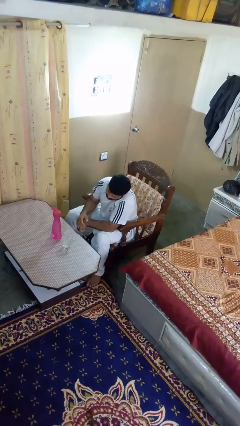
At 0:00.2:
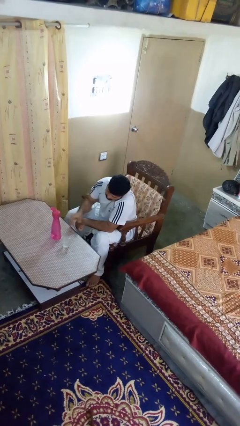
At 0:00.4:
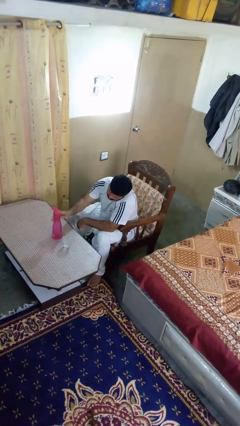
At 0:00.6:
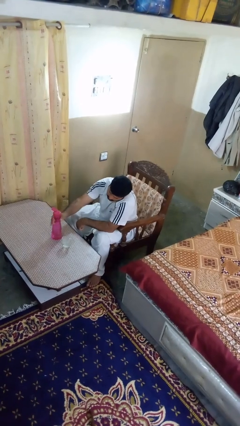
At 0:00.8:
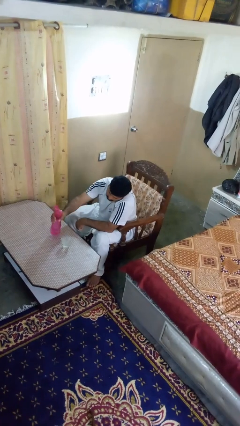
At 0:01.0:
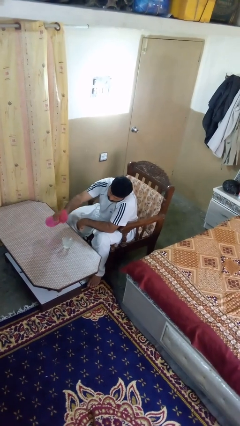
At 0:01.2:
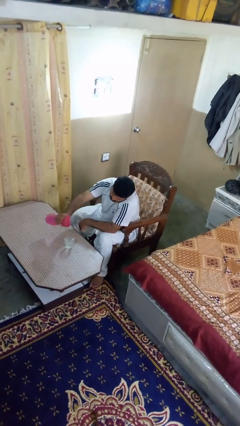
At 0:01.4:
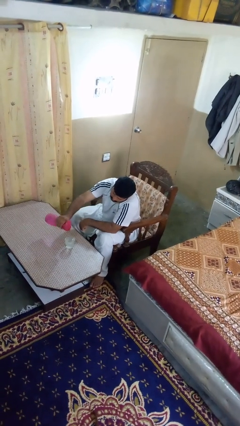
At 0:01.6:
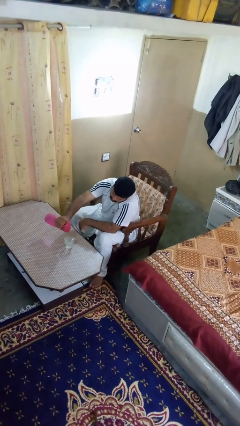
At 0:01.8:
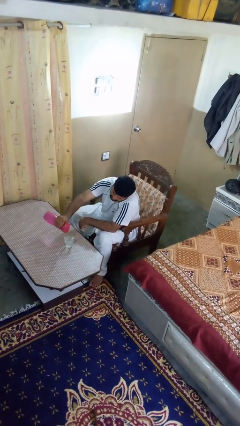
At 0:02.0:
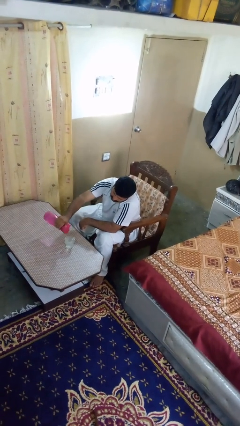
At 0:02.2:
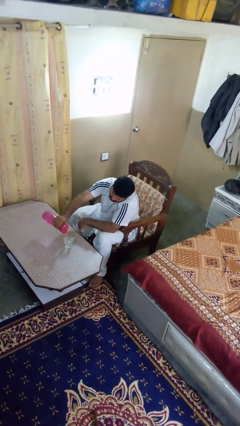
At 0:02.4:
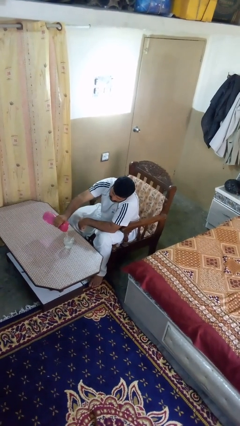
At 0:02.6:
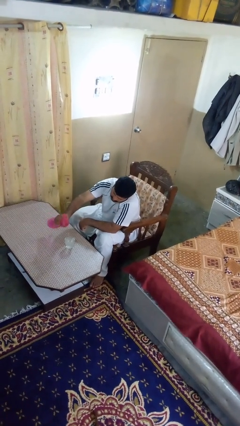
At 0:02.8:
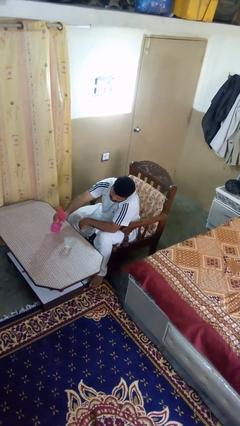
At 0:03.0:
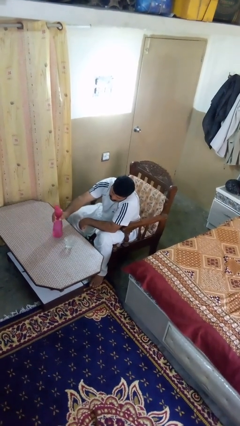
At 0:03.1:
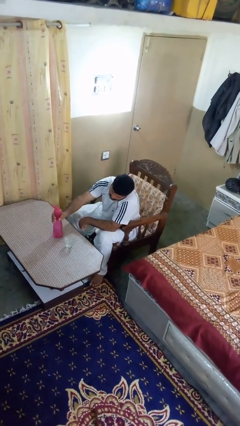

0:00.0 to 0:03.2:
person pours liquid into cup

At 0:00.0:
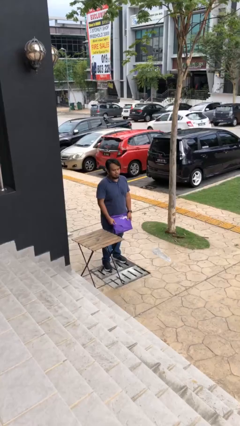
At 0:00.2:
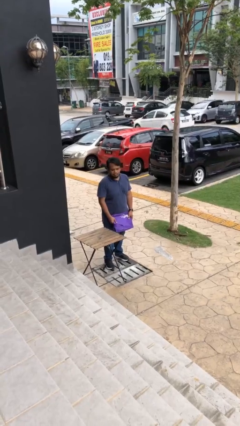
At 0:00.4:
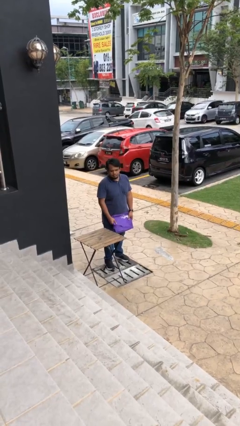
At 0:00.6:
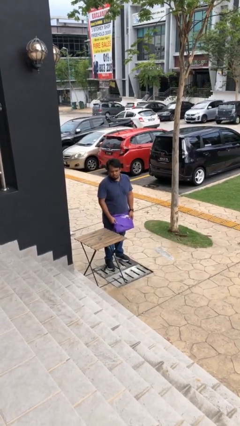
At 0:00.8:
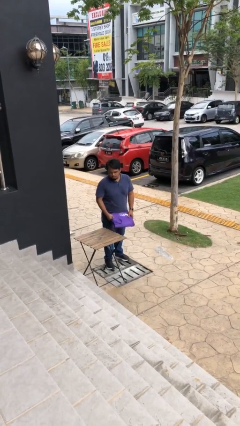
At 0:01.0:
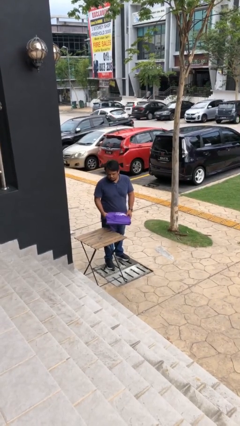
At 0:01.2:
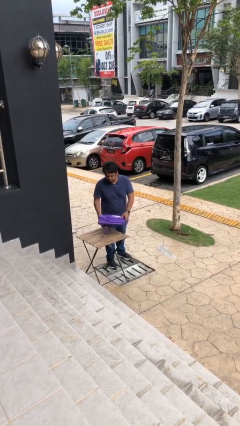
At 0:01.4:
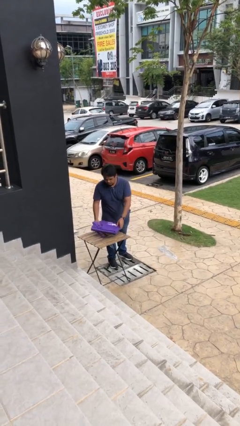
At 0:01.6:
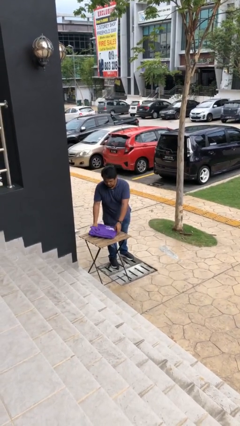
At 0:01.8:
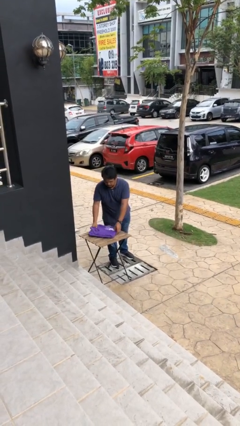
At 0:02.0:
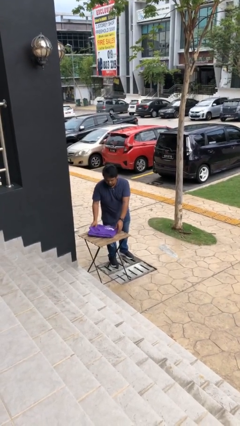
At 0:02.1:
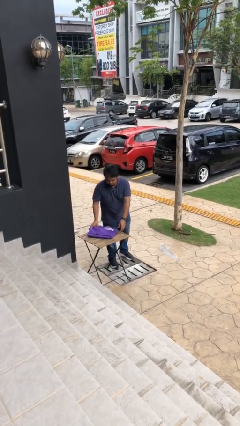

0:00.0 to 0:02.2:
person puts down object on table

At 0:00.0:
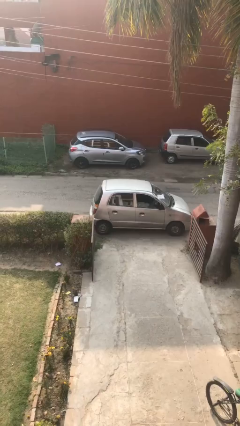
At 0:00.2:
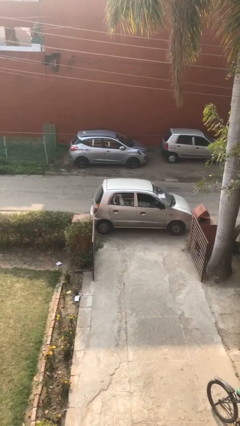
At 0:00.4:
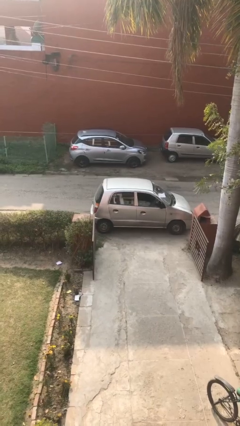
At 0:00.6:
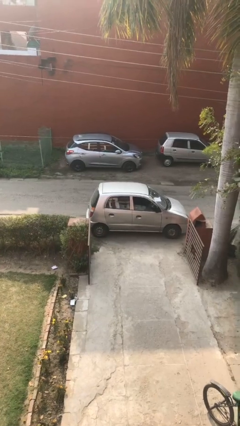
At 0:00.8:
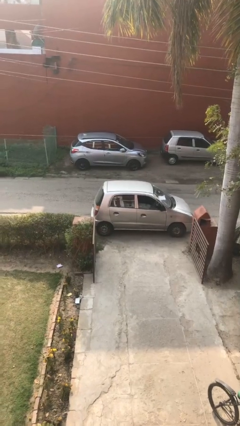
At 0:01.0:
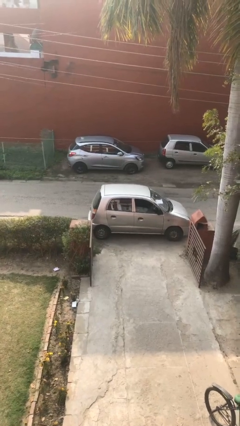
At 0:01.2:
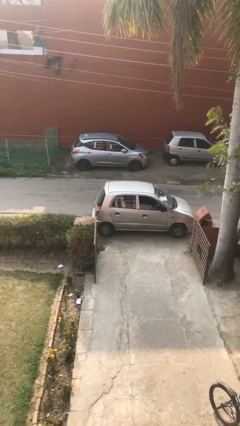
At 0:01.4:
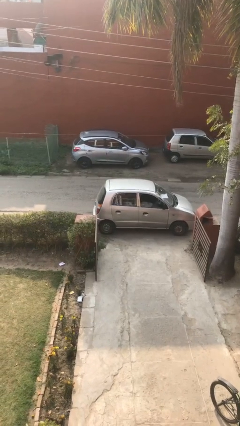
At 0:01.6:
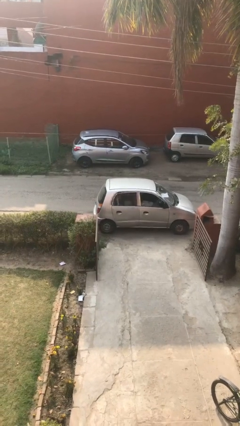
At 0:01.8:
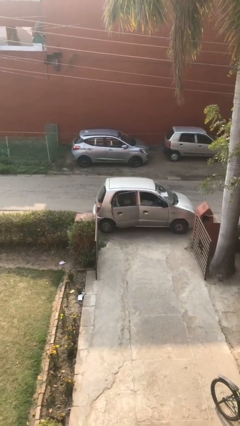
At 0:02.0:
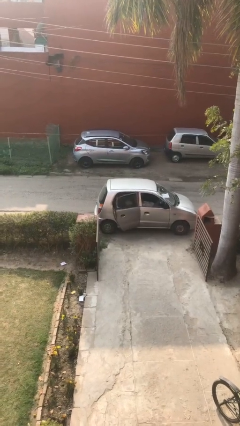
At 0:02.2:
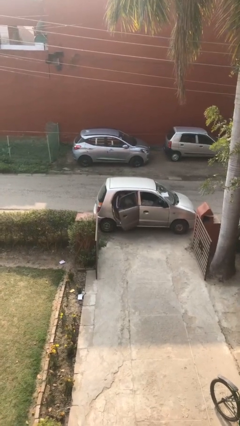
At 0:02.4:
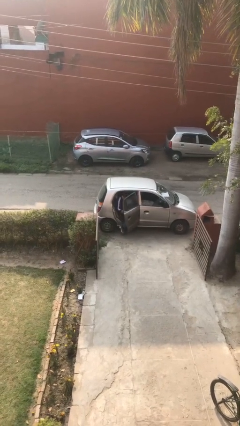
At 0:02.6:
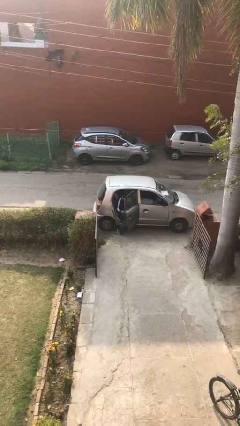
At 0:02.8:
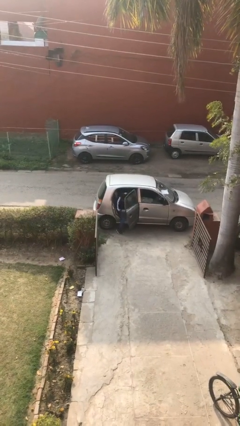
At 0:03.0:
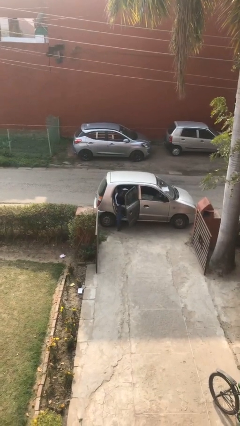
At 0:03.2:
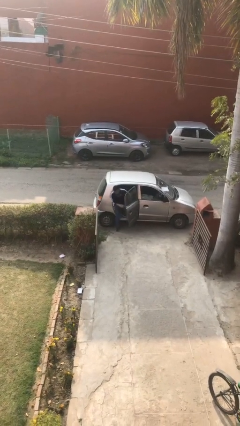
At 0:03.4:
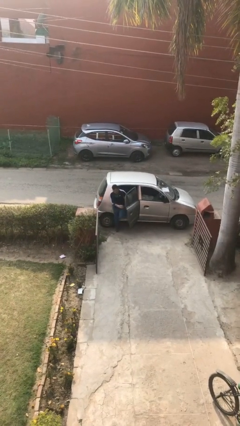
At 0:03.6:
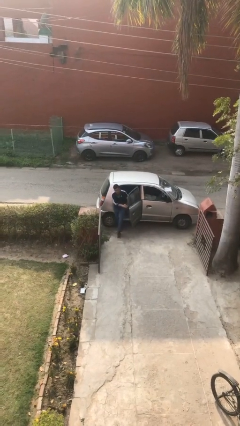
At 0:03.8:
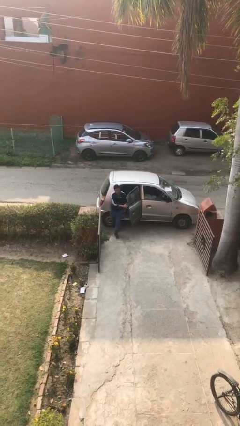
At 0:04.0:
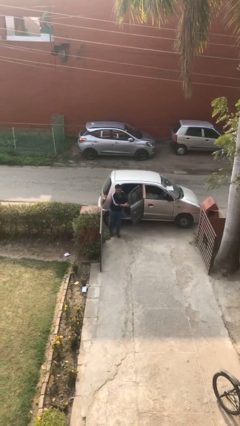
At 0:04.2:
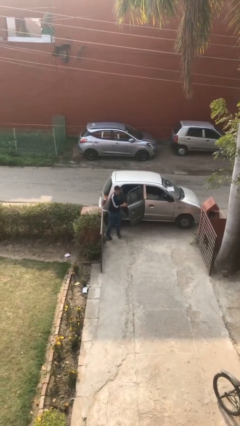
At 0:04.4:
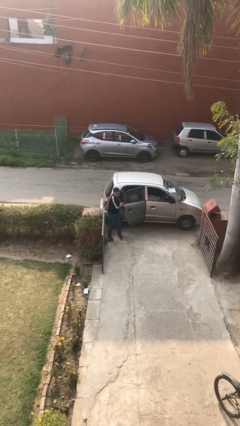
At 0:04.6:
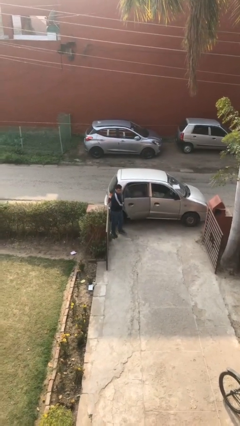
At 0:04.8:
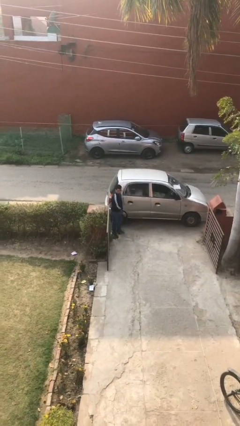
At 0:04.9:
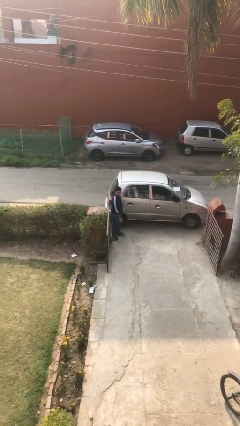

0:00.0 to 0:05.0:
person exits car

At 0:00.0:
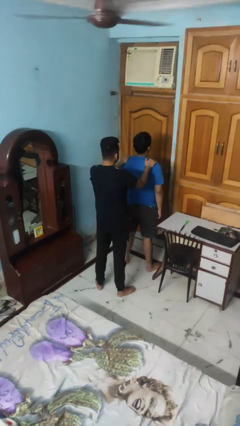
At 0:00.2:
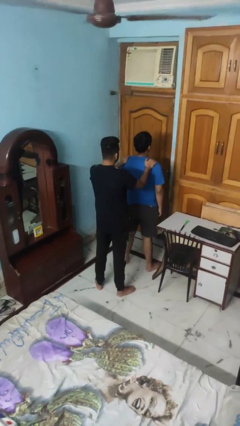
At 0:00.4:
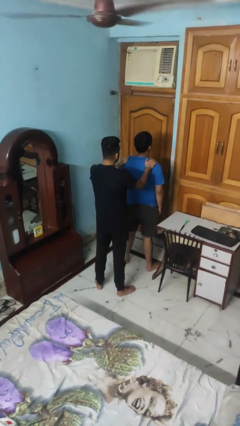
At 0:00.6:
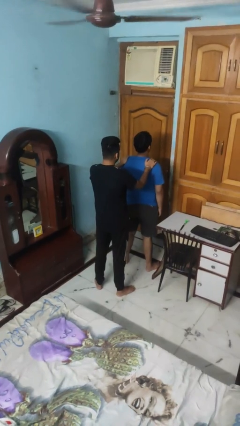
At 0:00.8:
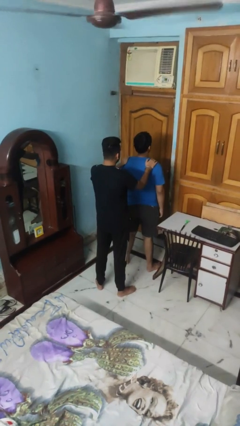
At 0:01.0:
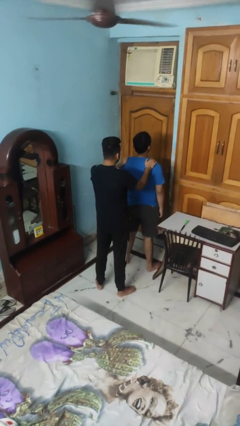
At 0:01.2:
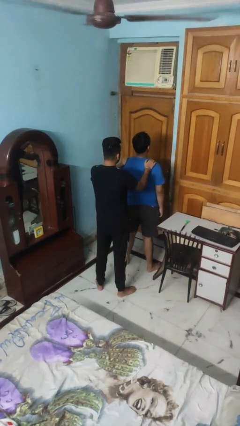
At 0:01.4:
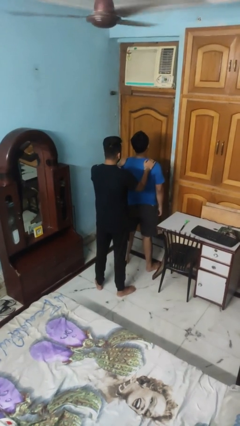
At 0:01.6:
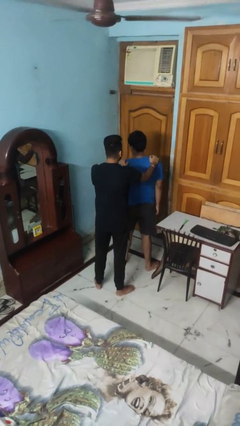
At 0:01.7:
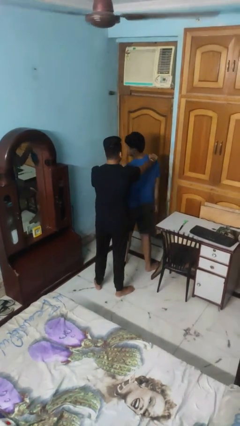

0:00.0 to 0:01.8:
person grabs person by shoulder

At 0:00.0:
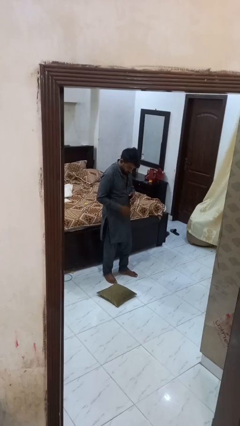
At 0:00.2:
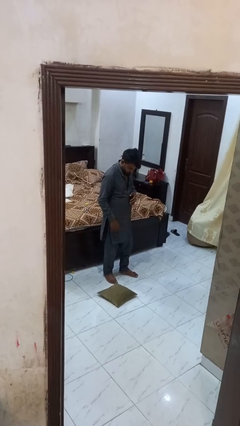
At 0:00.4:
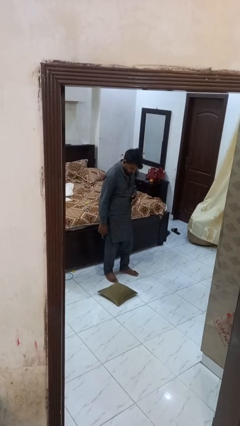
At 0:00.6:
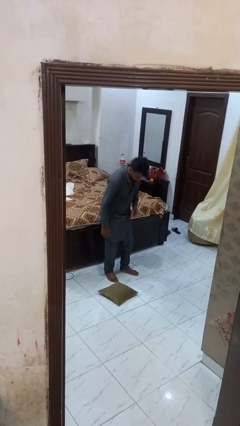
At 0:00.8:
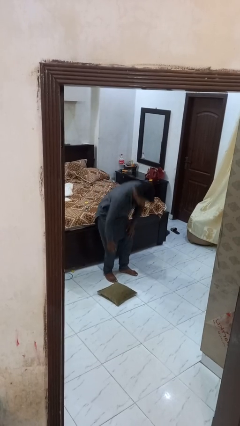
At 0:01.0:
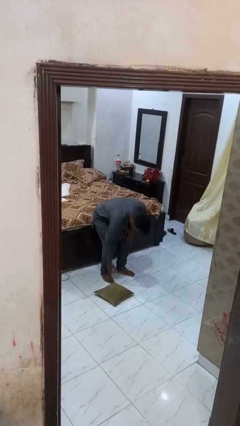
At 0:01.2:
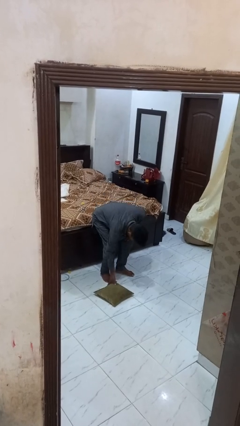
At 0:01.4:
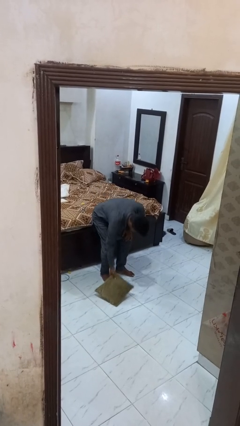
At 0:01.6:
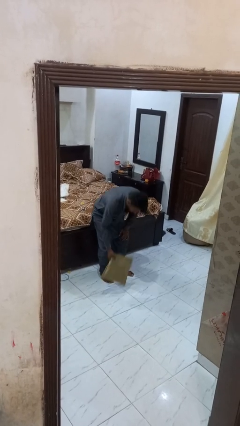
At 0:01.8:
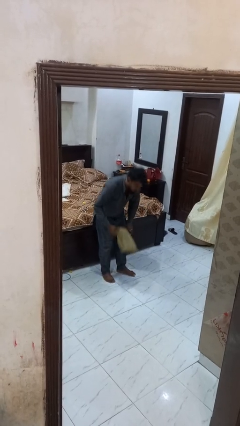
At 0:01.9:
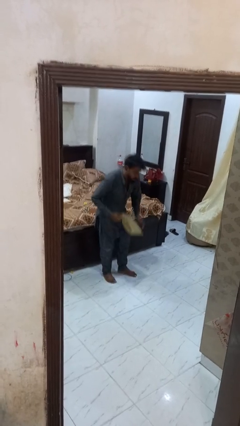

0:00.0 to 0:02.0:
person picks up object from floor

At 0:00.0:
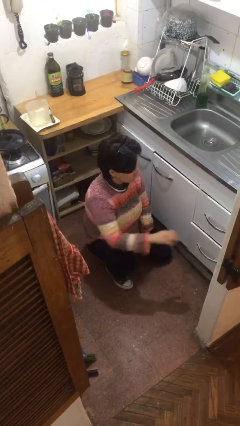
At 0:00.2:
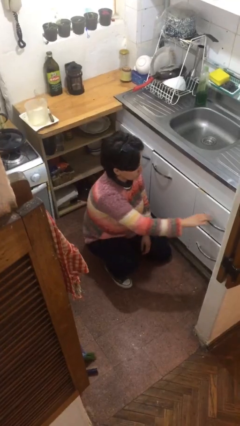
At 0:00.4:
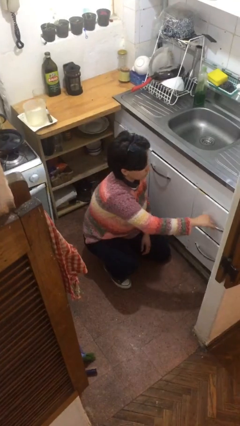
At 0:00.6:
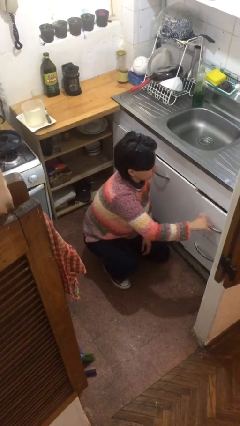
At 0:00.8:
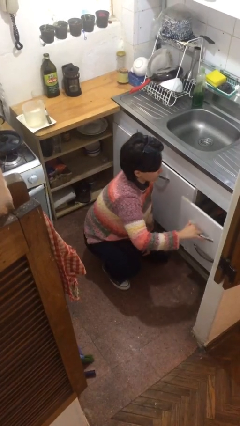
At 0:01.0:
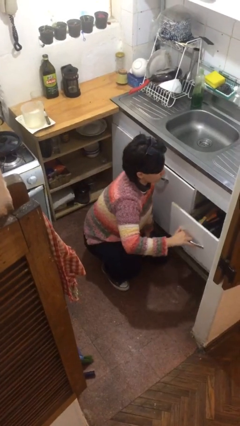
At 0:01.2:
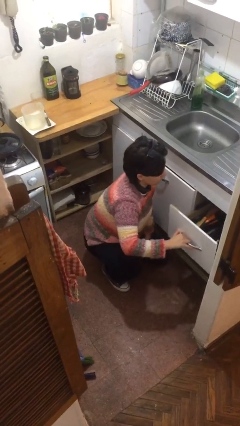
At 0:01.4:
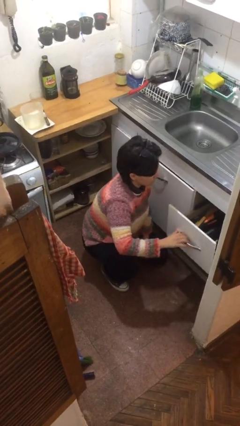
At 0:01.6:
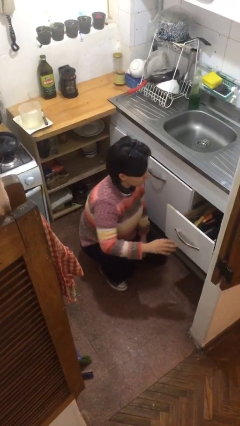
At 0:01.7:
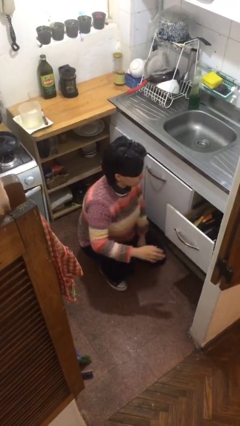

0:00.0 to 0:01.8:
person opens kitchen drawer

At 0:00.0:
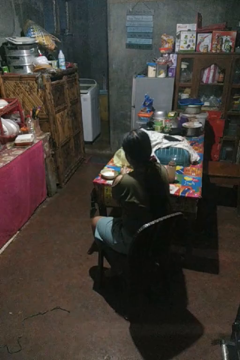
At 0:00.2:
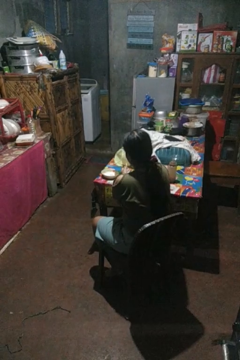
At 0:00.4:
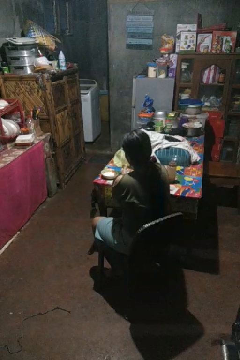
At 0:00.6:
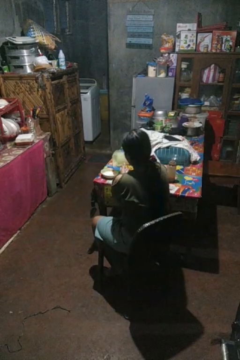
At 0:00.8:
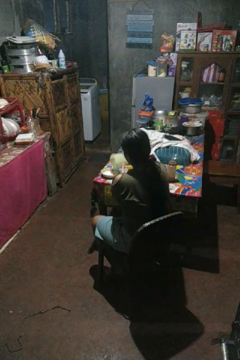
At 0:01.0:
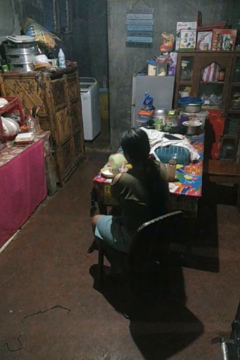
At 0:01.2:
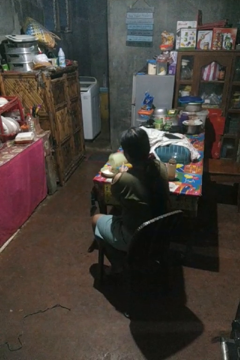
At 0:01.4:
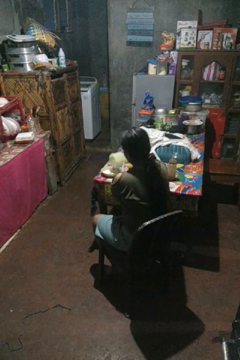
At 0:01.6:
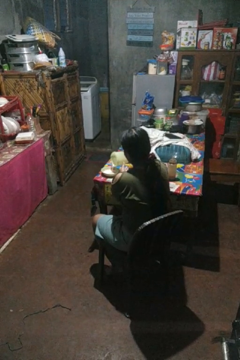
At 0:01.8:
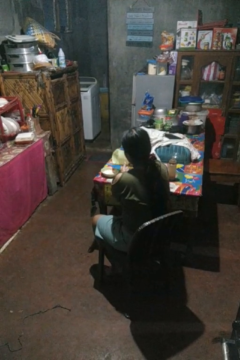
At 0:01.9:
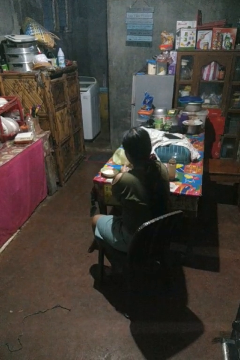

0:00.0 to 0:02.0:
person pours into bowl
